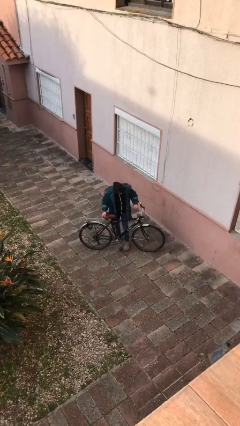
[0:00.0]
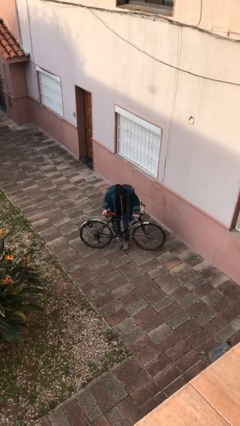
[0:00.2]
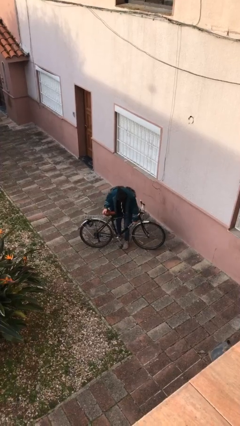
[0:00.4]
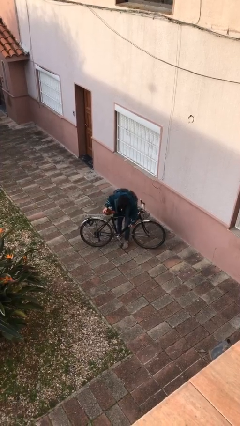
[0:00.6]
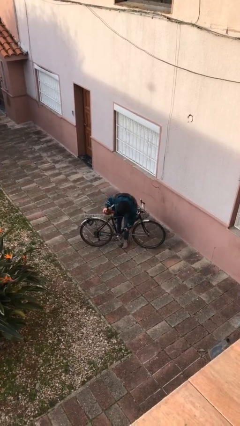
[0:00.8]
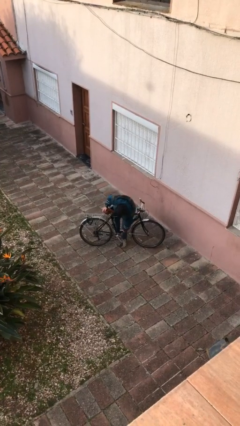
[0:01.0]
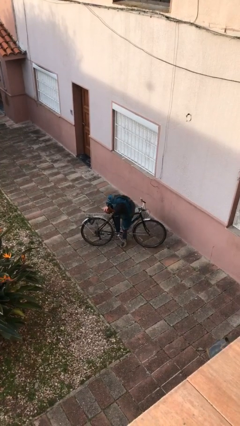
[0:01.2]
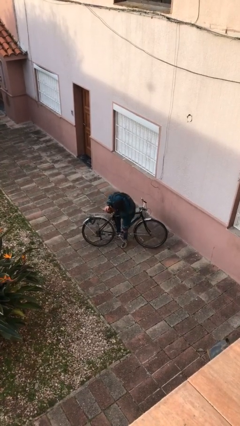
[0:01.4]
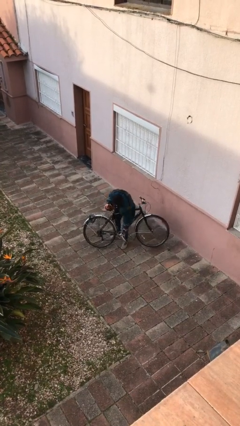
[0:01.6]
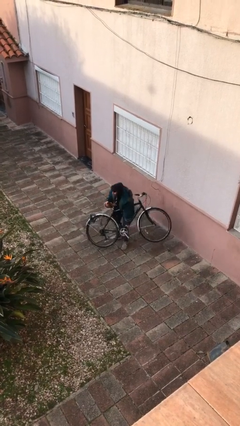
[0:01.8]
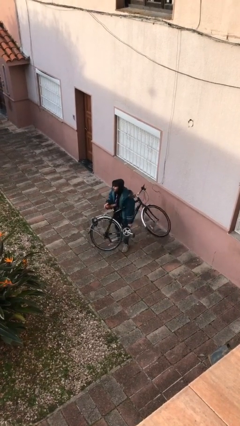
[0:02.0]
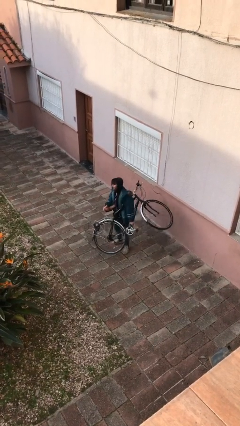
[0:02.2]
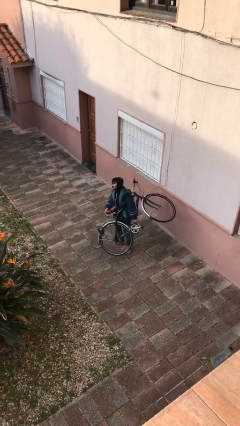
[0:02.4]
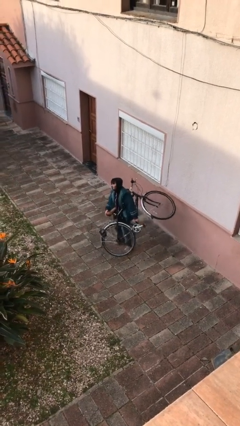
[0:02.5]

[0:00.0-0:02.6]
person picks up object from floor

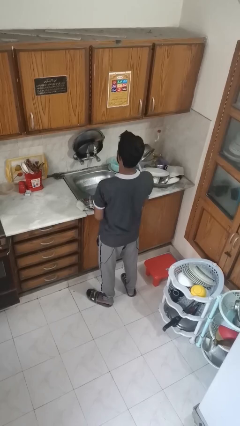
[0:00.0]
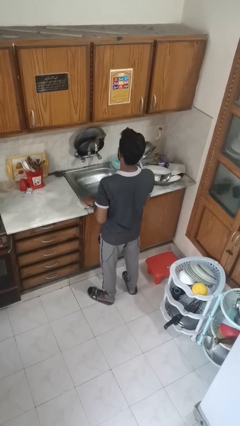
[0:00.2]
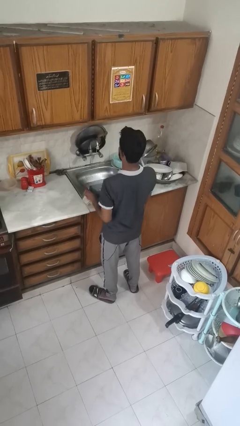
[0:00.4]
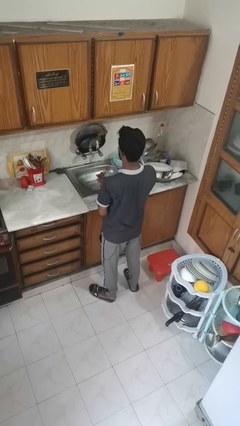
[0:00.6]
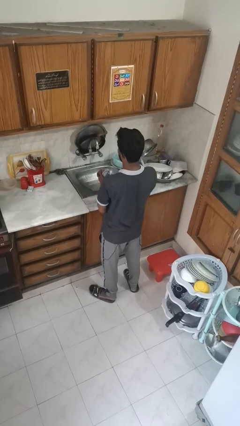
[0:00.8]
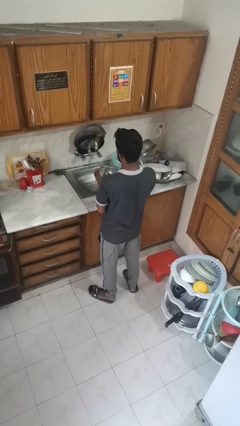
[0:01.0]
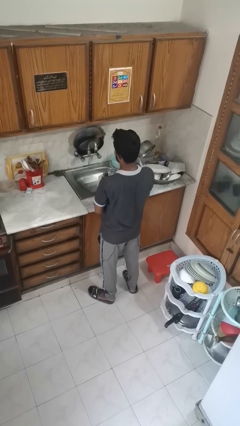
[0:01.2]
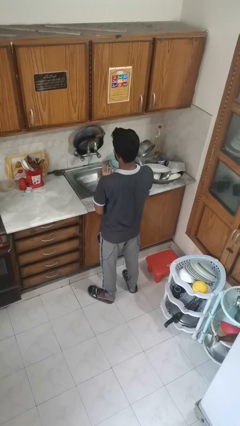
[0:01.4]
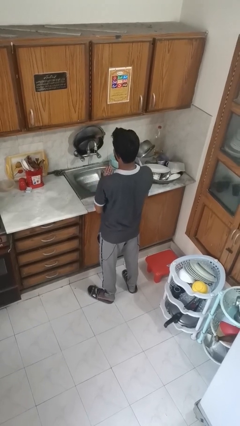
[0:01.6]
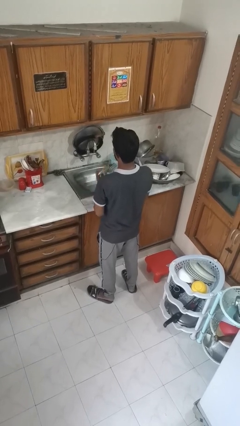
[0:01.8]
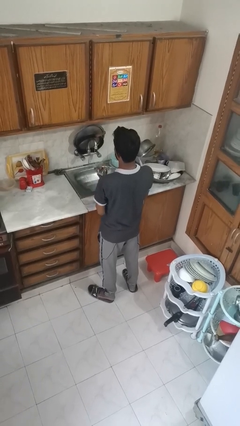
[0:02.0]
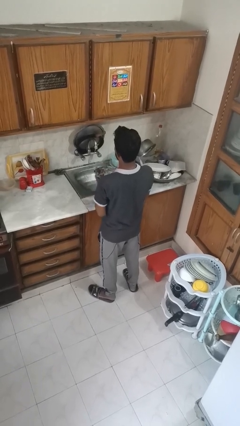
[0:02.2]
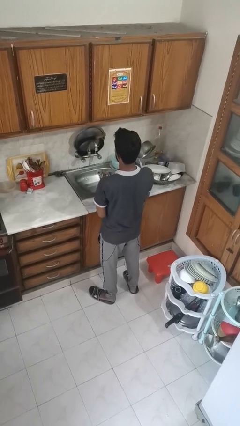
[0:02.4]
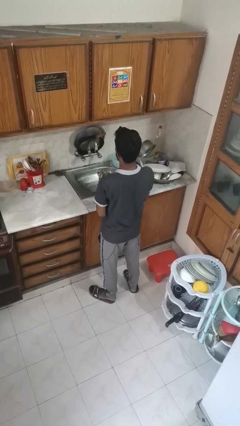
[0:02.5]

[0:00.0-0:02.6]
person dries hands with towel

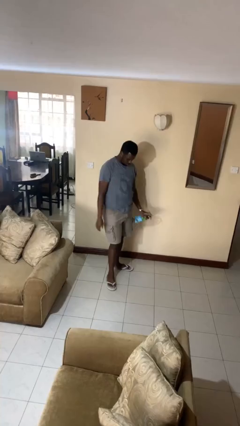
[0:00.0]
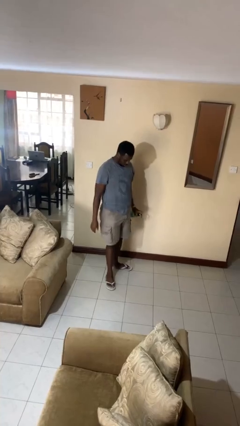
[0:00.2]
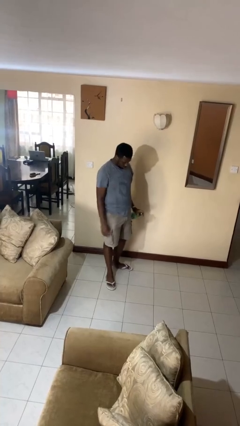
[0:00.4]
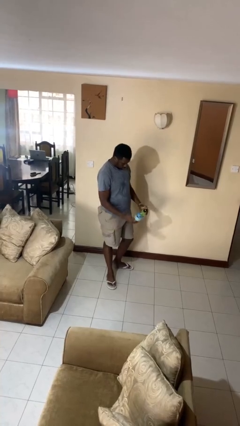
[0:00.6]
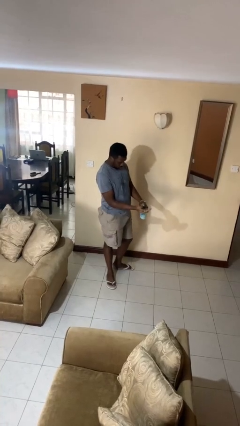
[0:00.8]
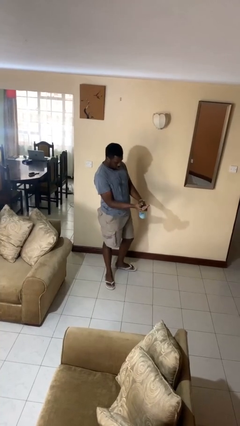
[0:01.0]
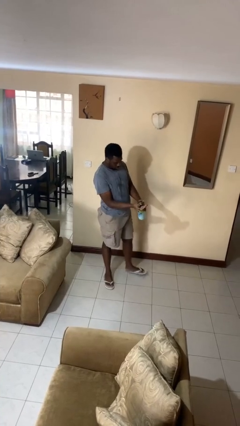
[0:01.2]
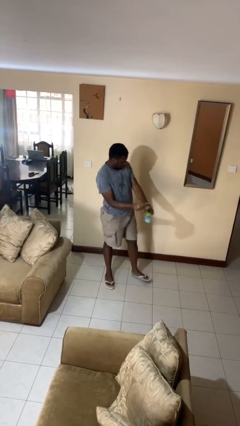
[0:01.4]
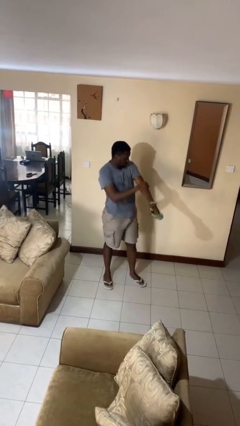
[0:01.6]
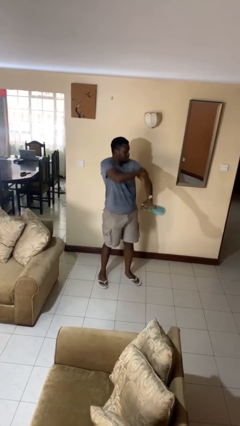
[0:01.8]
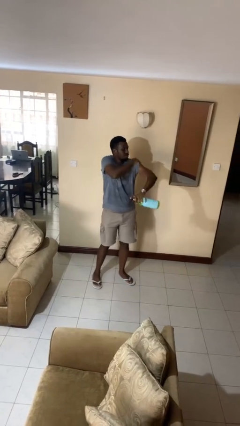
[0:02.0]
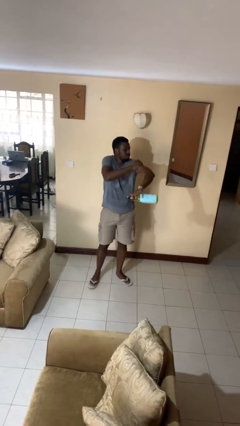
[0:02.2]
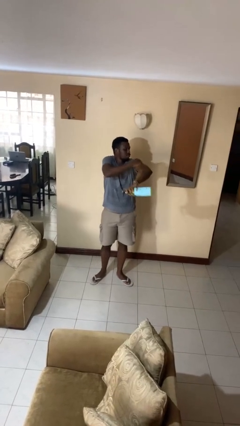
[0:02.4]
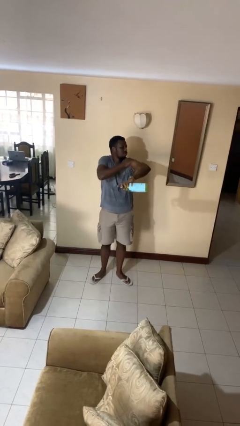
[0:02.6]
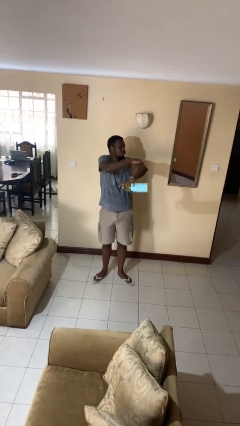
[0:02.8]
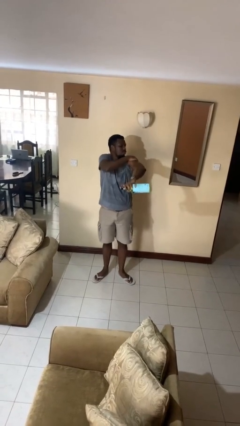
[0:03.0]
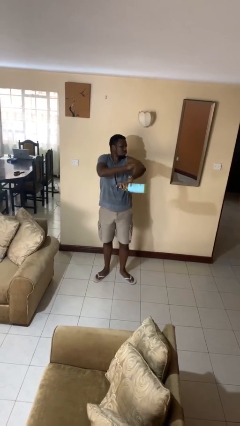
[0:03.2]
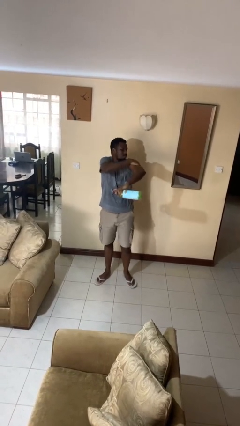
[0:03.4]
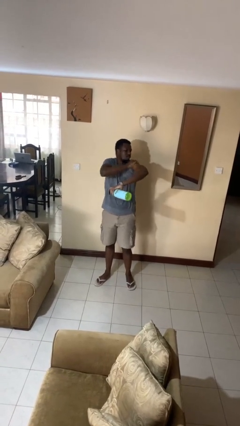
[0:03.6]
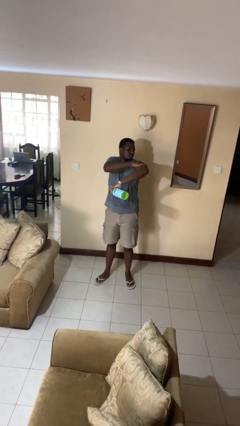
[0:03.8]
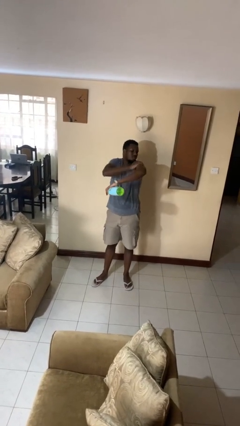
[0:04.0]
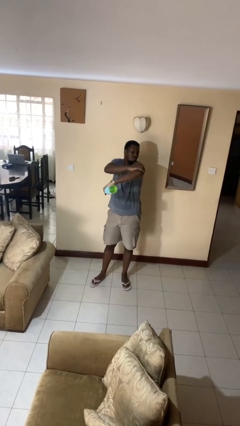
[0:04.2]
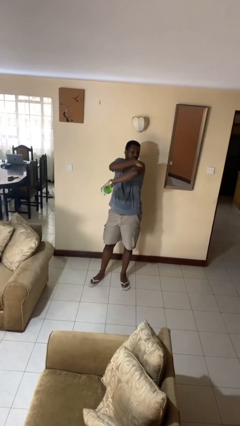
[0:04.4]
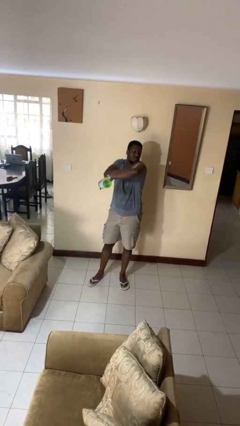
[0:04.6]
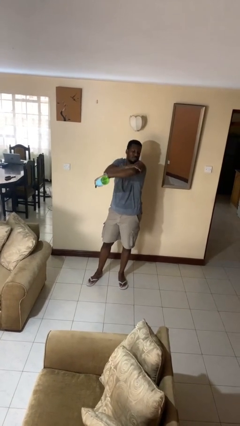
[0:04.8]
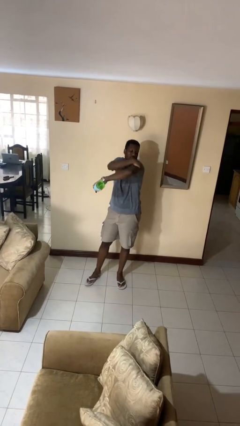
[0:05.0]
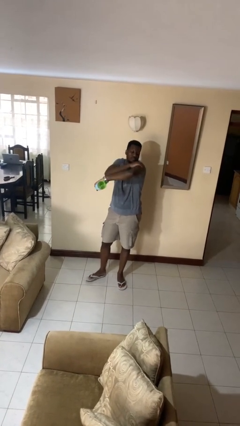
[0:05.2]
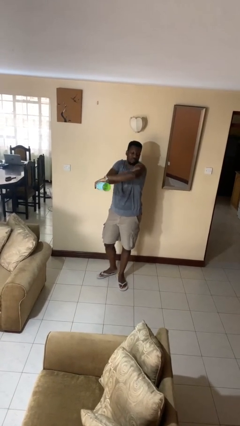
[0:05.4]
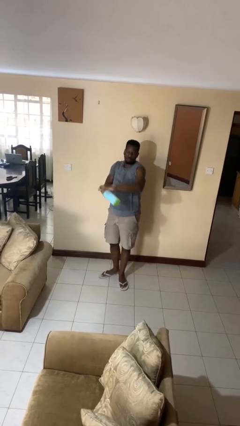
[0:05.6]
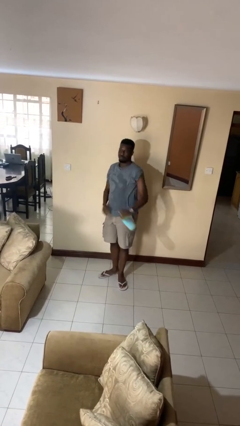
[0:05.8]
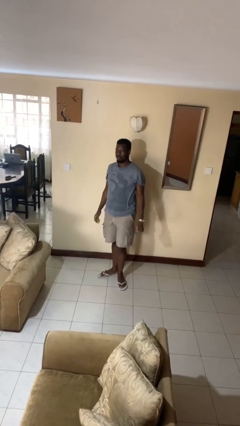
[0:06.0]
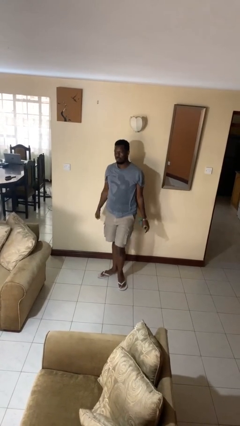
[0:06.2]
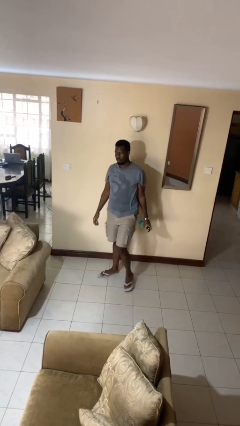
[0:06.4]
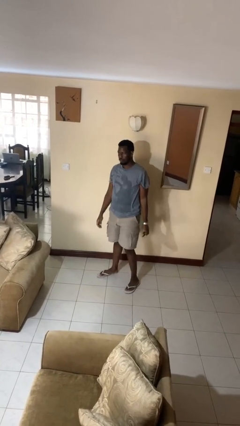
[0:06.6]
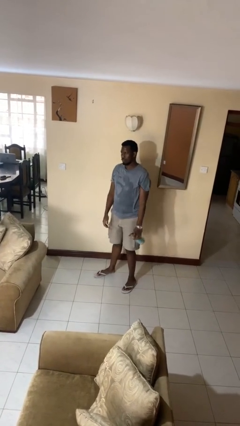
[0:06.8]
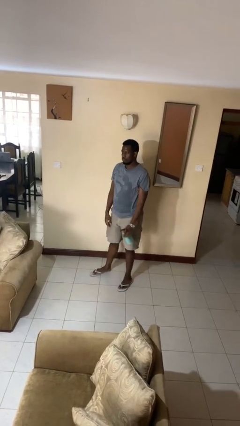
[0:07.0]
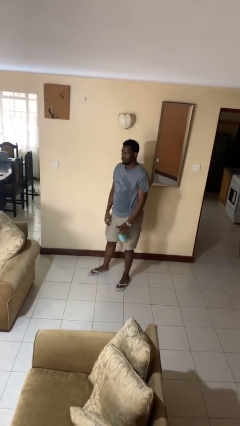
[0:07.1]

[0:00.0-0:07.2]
person applies sunscreen

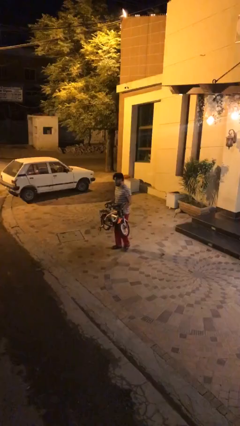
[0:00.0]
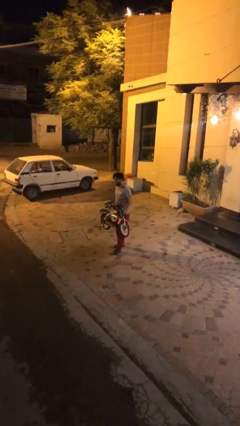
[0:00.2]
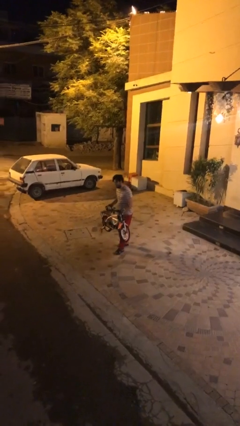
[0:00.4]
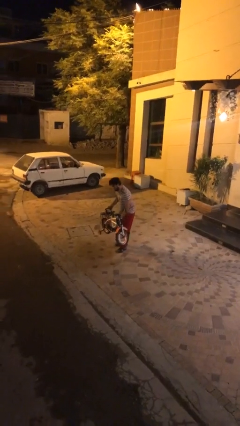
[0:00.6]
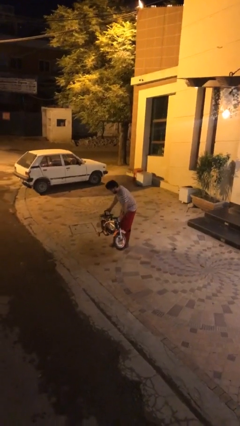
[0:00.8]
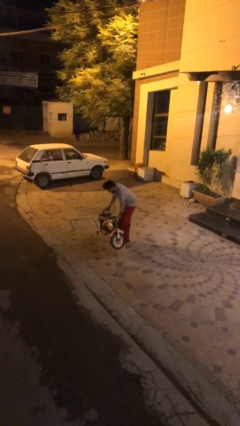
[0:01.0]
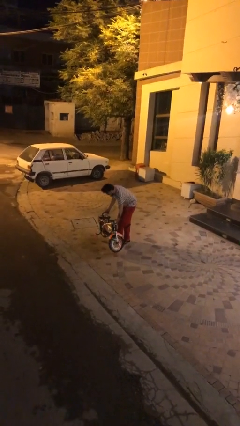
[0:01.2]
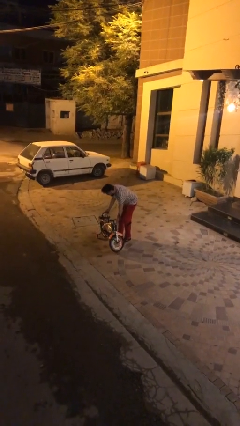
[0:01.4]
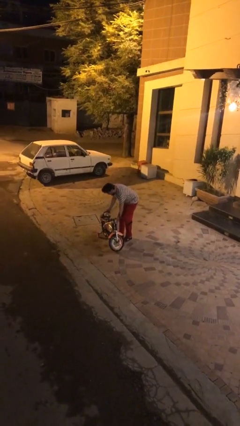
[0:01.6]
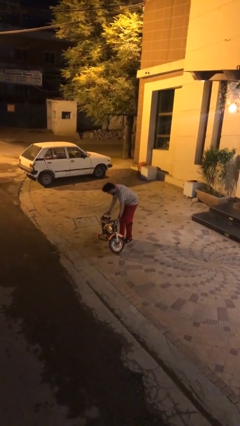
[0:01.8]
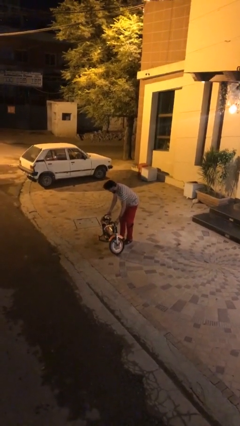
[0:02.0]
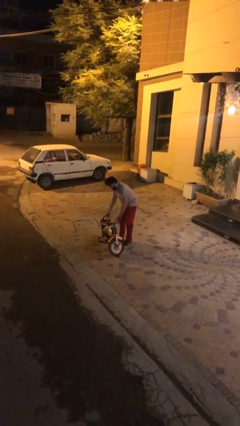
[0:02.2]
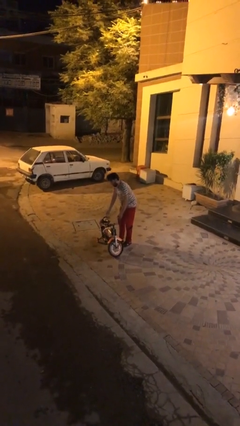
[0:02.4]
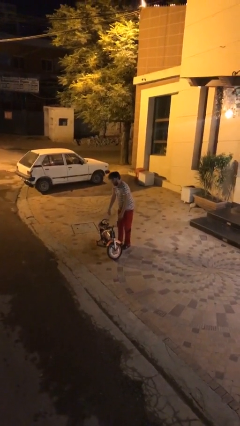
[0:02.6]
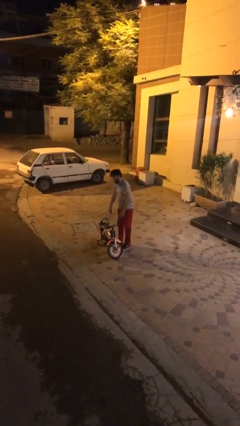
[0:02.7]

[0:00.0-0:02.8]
person puts down object on floor

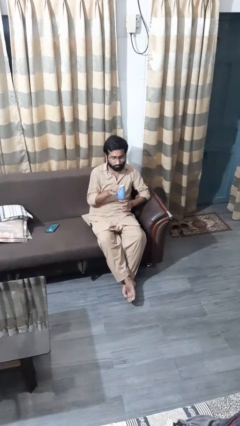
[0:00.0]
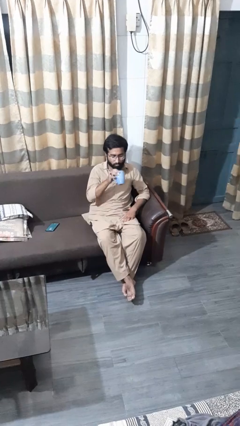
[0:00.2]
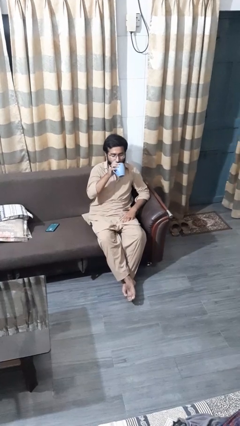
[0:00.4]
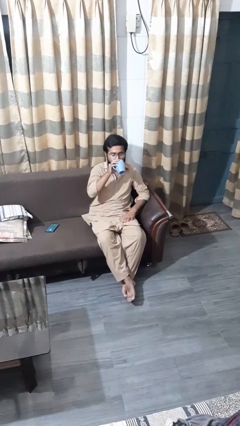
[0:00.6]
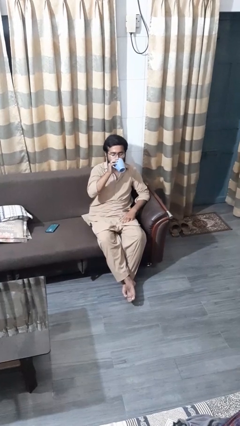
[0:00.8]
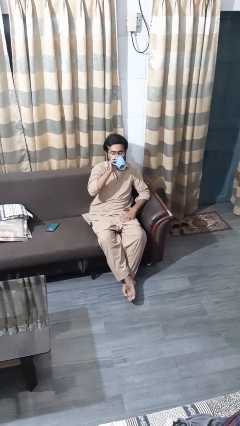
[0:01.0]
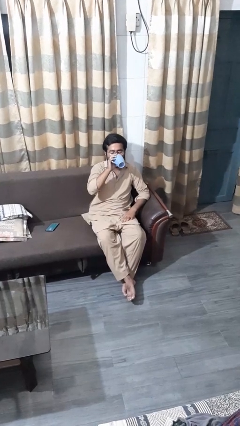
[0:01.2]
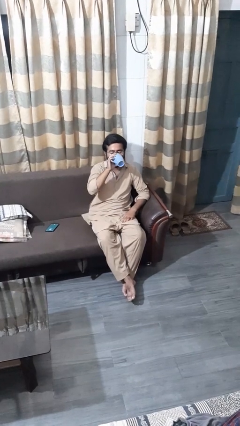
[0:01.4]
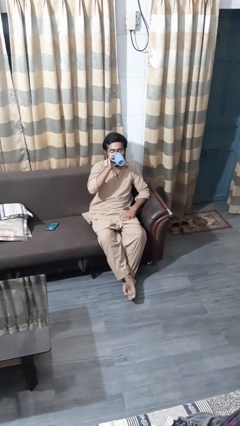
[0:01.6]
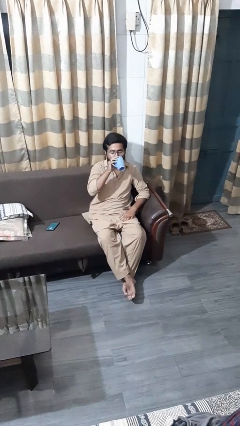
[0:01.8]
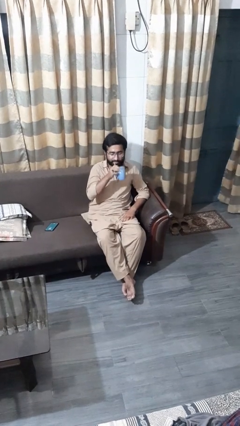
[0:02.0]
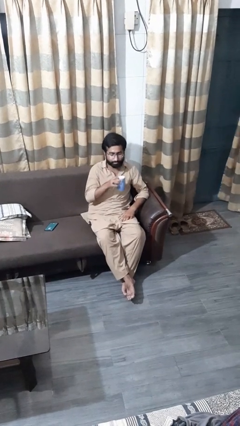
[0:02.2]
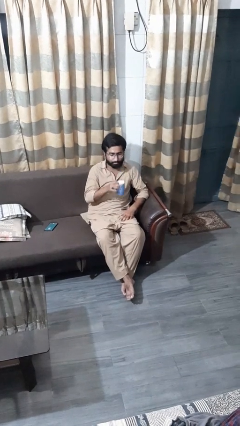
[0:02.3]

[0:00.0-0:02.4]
person drinks from mug
